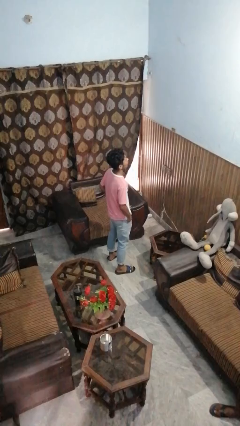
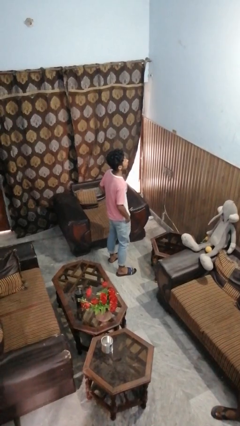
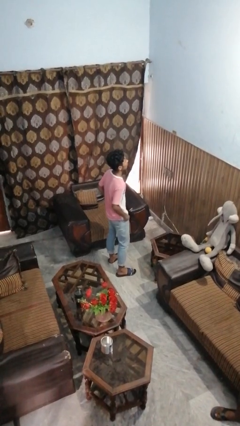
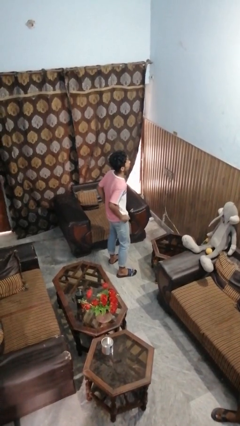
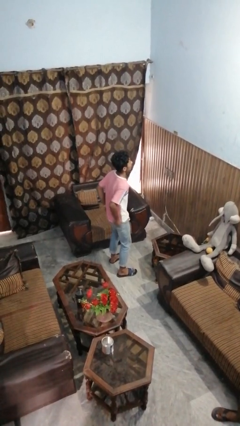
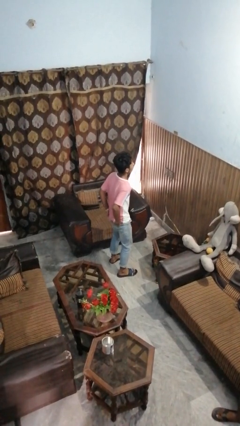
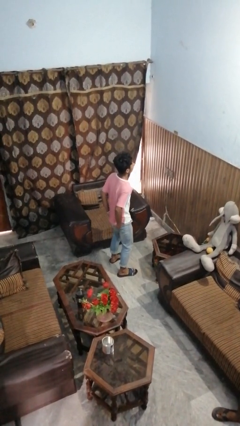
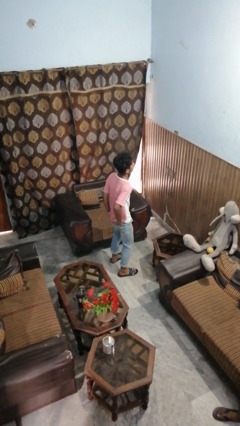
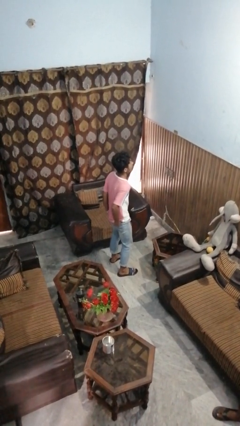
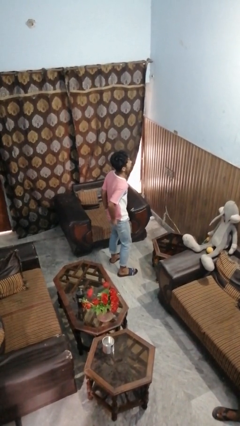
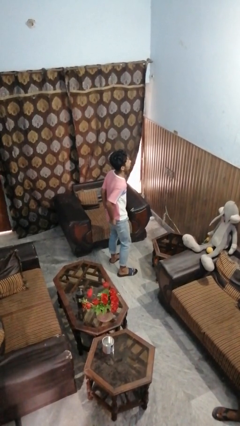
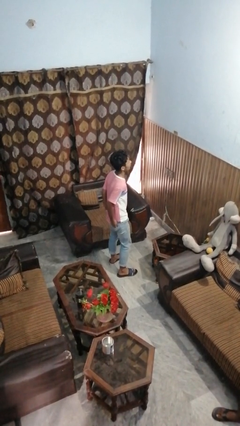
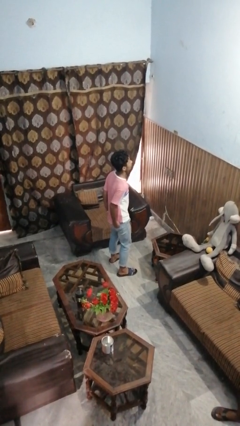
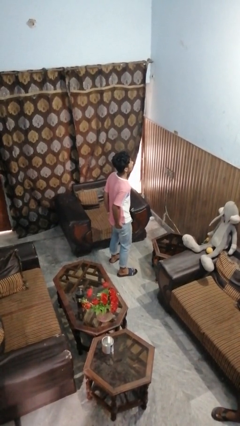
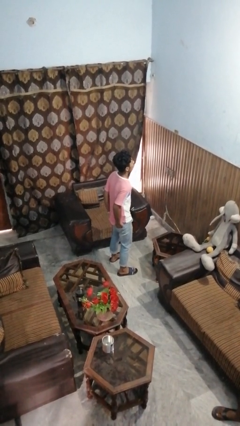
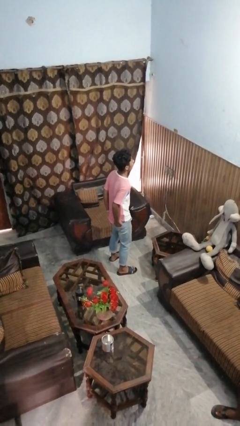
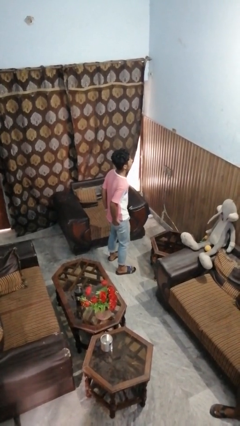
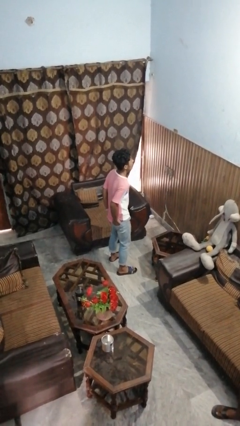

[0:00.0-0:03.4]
person puts hands in back pockets

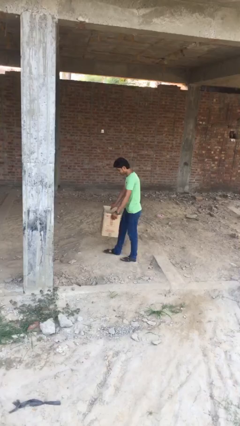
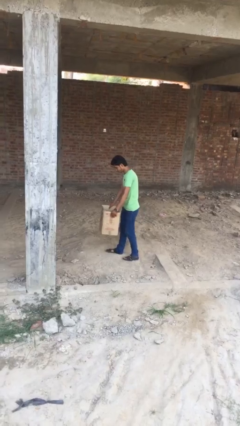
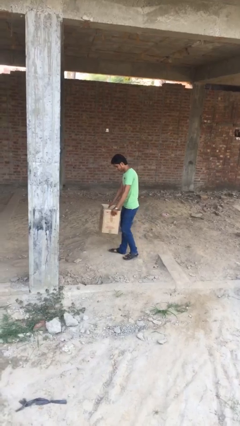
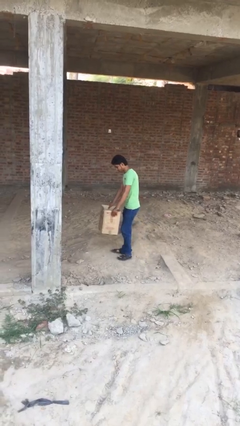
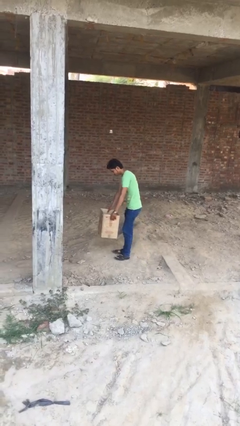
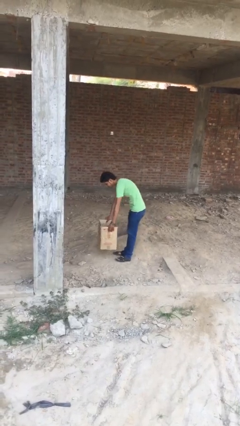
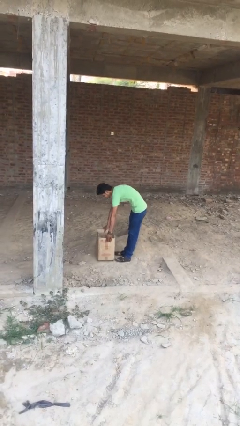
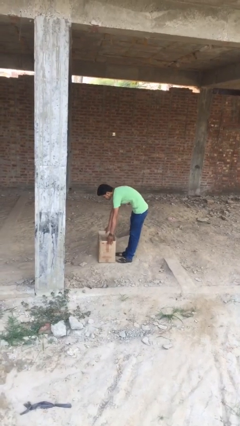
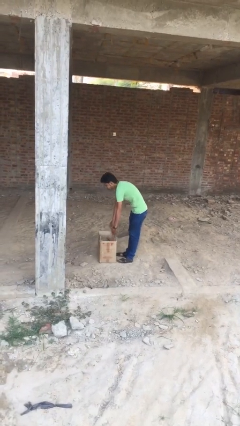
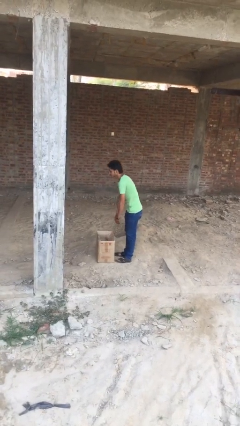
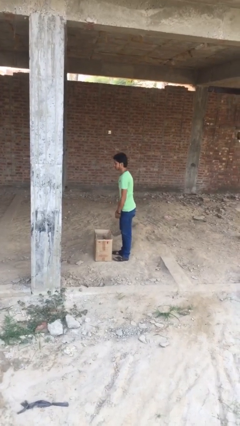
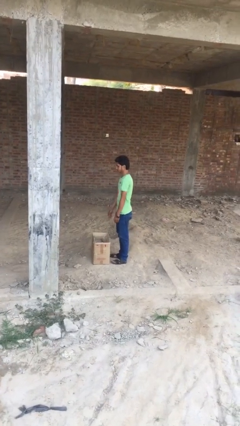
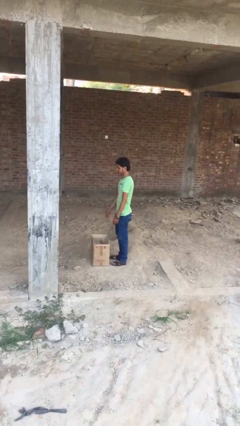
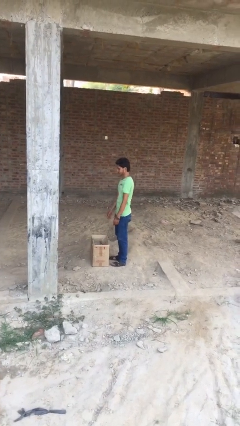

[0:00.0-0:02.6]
person puts down object on floor

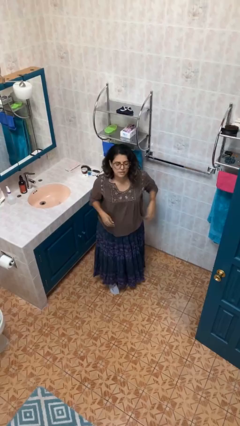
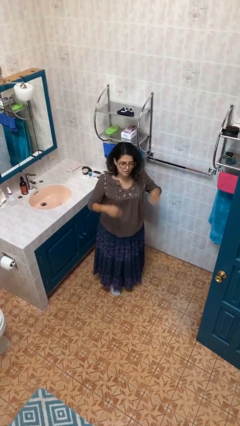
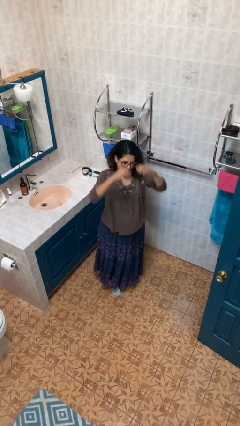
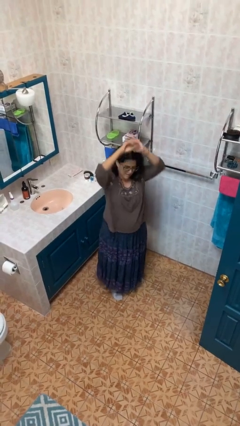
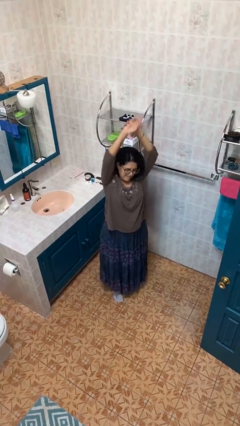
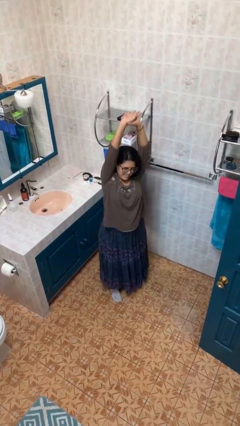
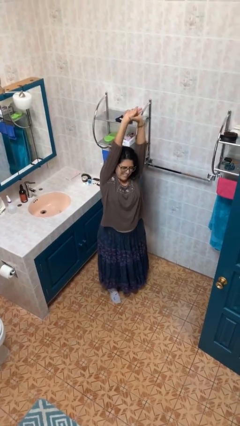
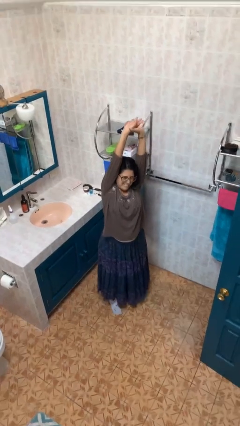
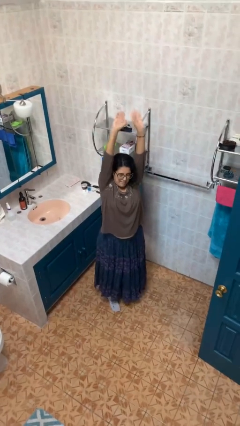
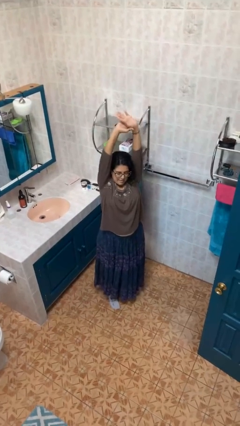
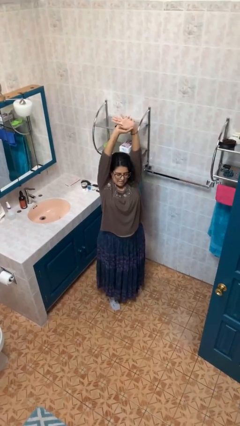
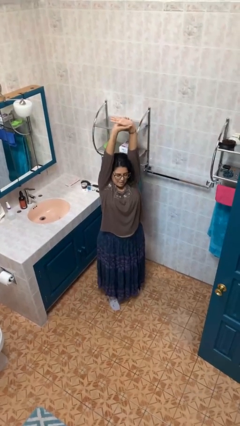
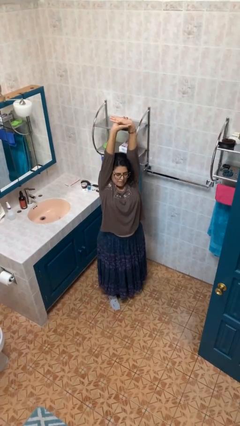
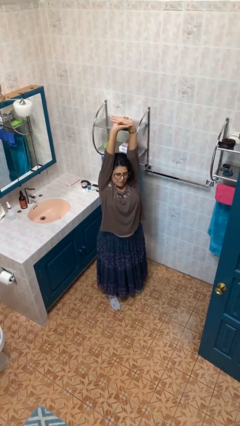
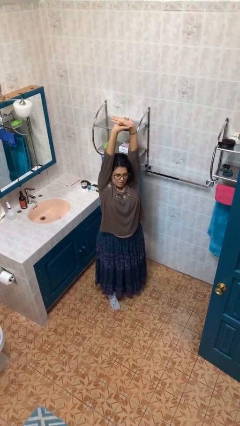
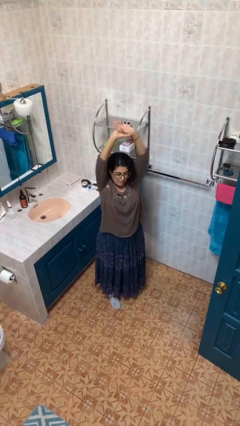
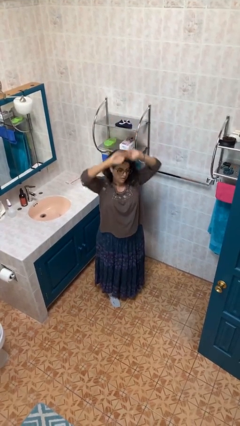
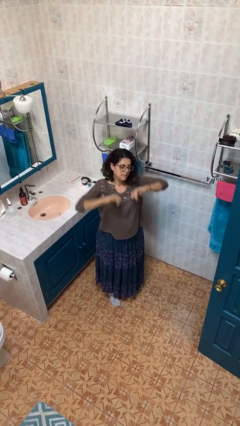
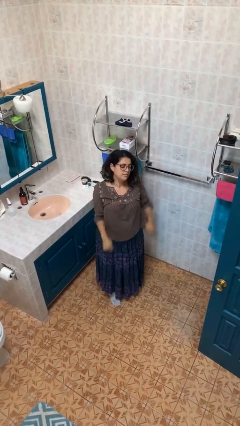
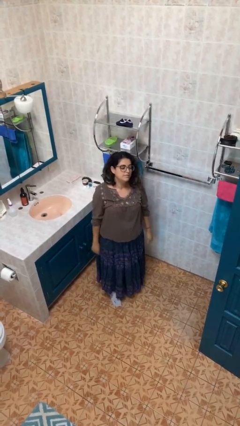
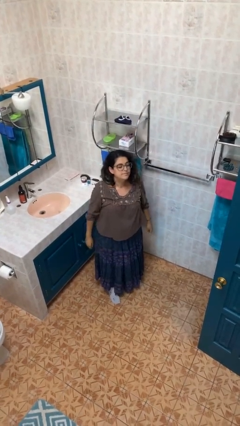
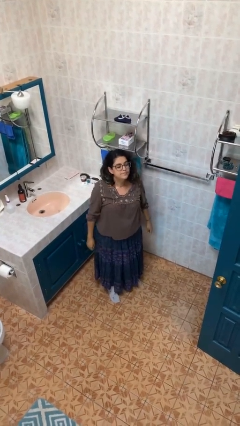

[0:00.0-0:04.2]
person stretches arms over head

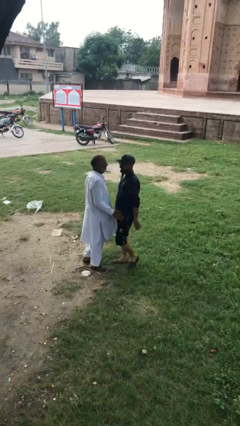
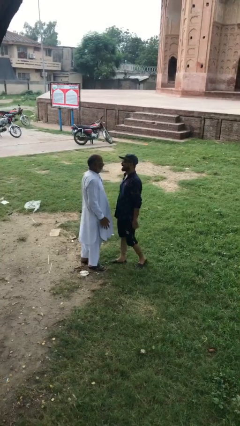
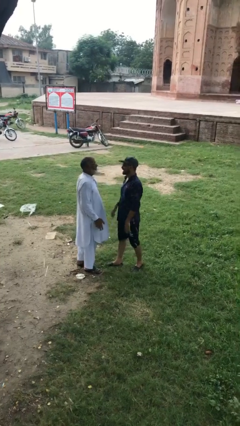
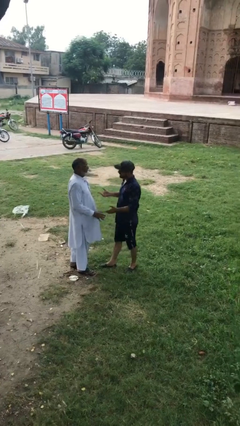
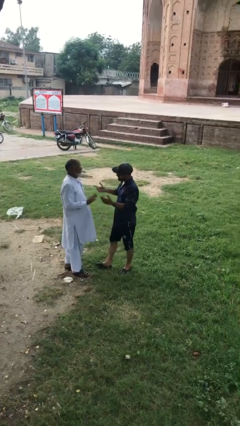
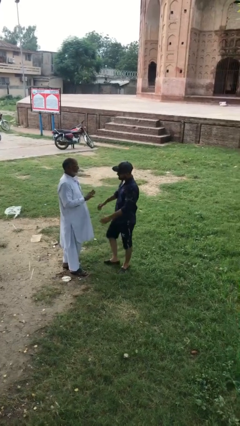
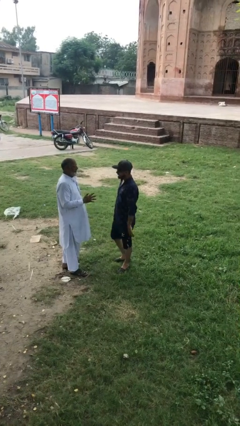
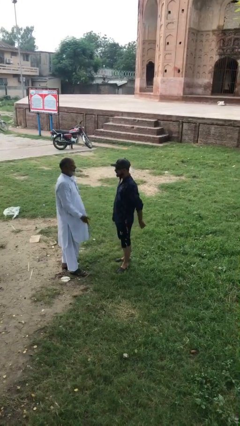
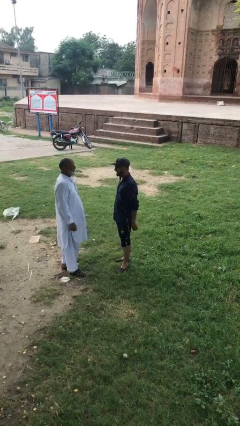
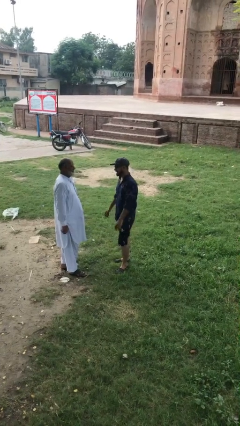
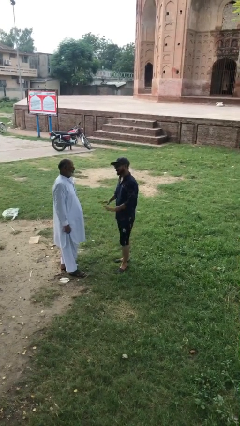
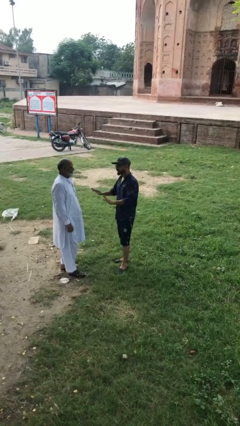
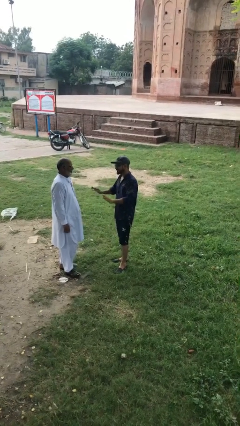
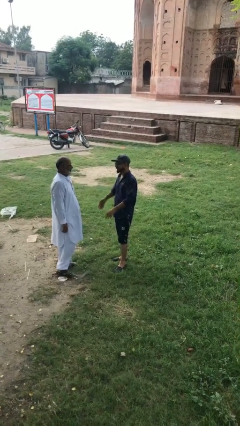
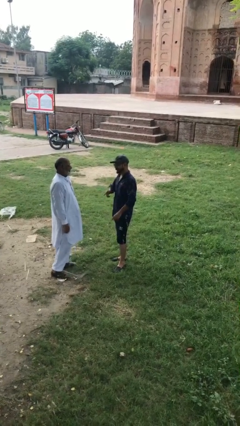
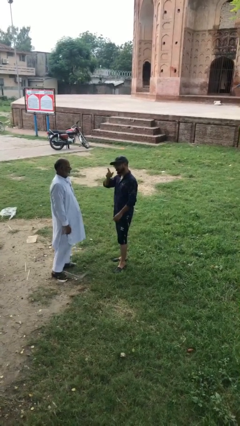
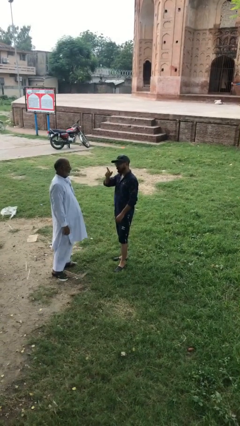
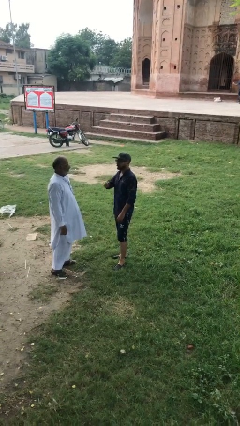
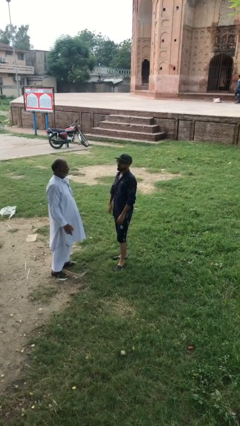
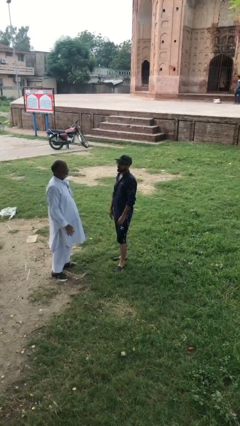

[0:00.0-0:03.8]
person talks to person

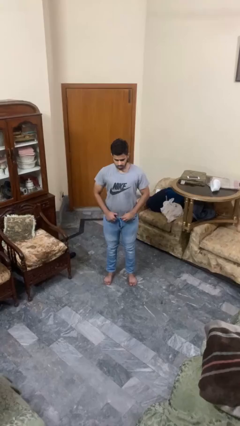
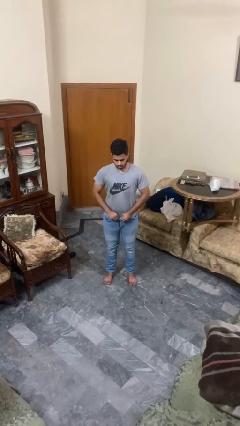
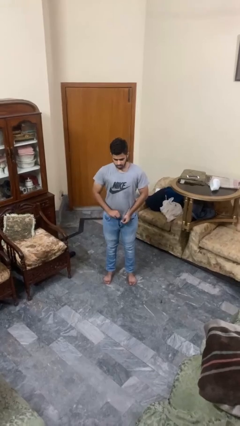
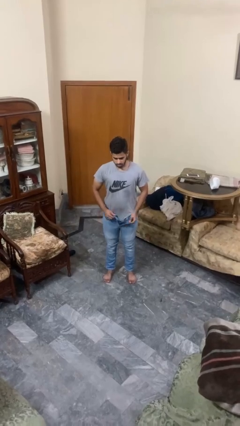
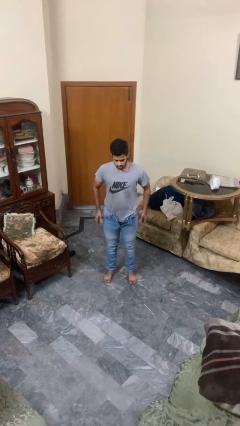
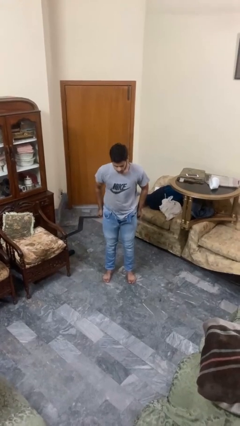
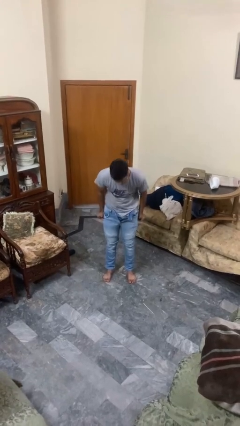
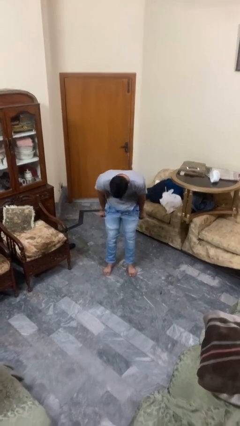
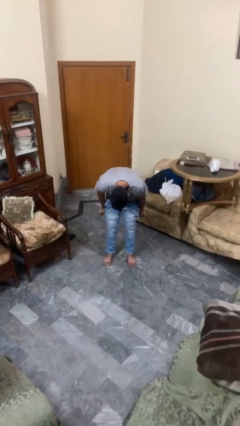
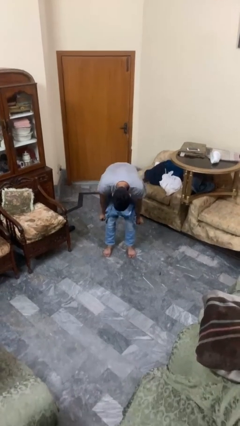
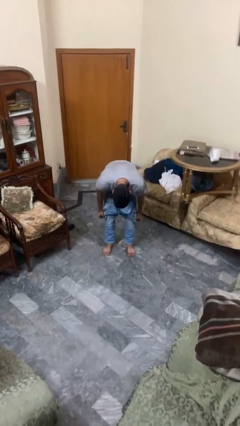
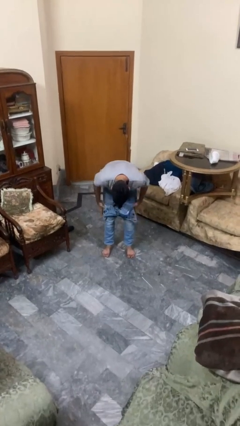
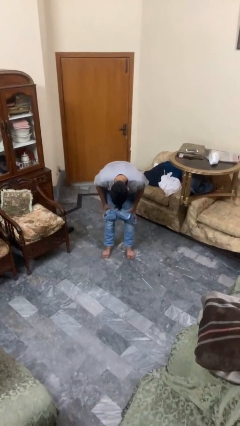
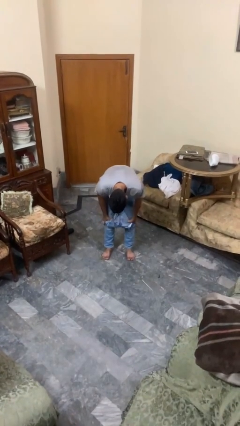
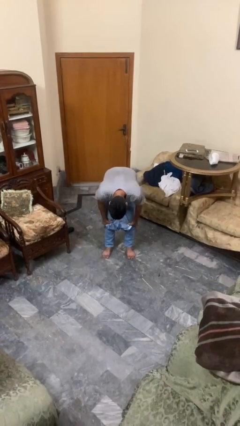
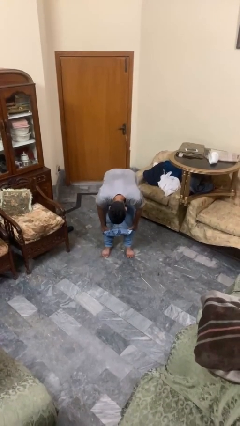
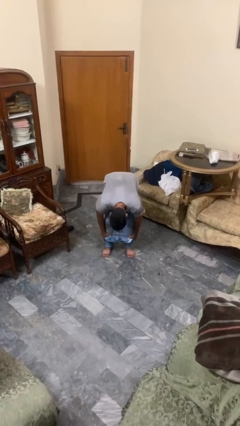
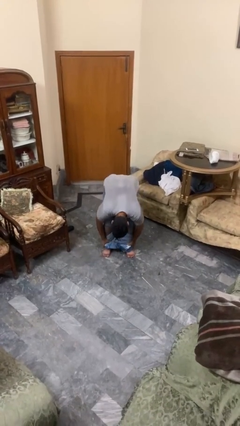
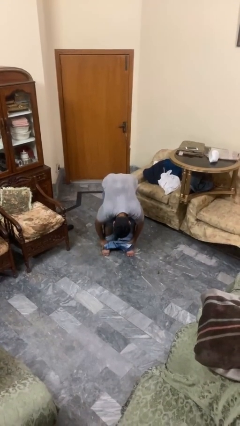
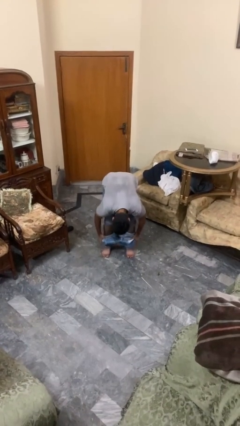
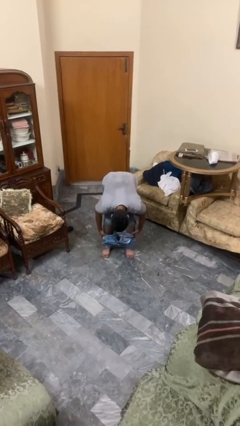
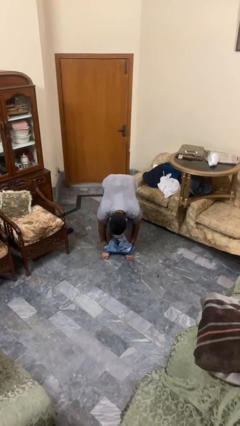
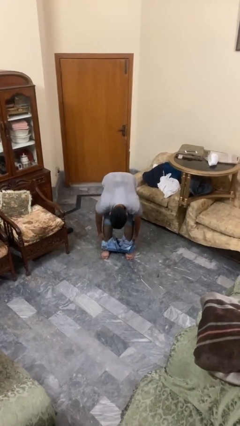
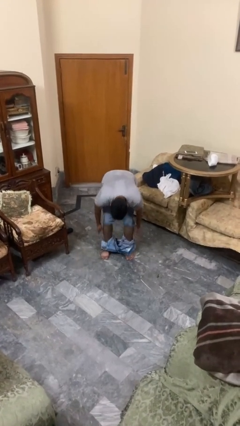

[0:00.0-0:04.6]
person takes off pants
